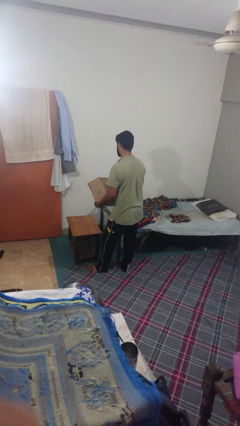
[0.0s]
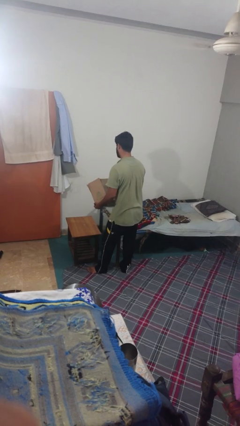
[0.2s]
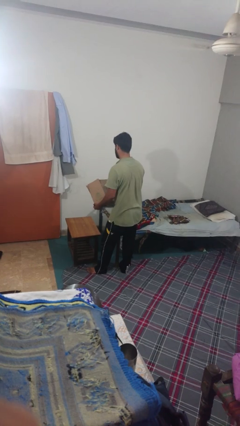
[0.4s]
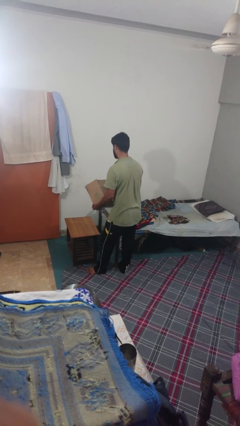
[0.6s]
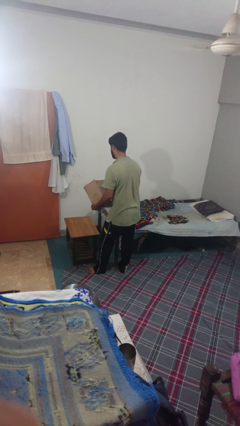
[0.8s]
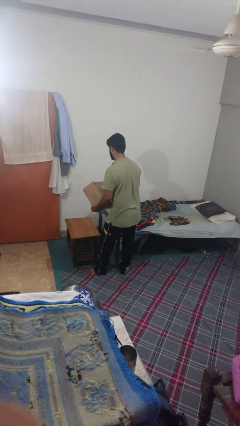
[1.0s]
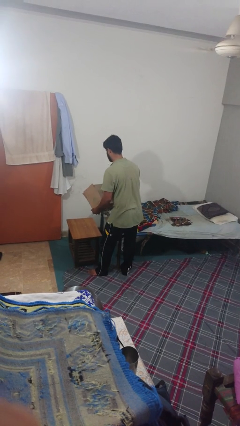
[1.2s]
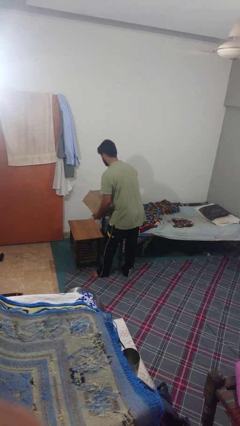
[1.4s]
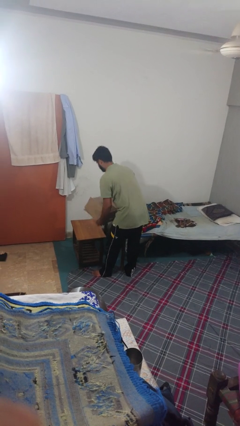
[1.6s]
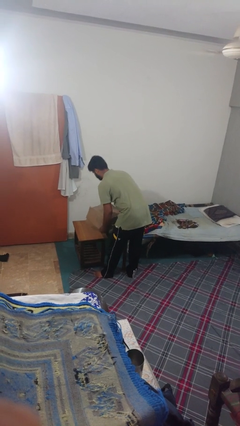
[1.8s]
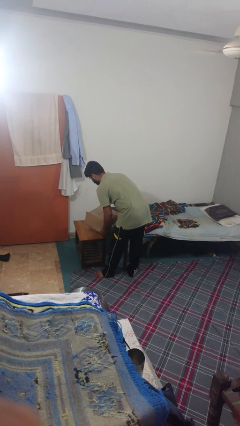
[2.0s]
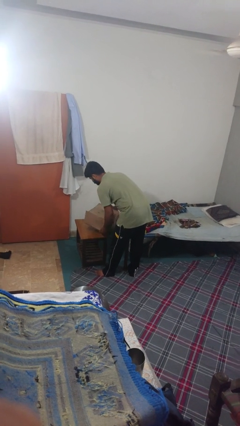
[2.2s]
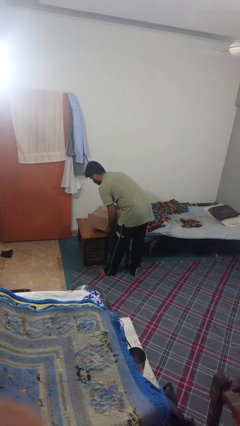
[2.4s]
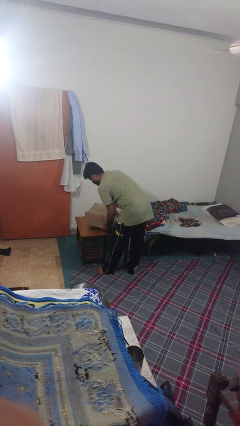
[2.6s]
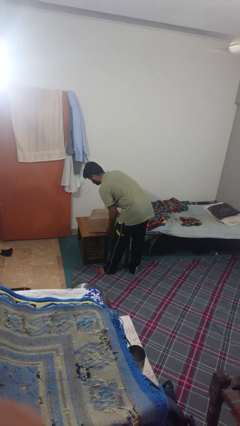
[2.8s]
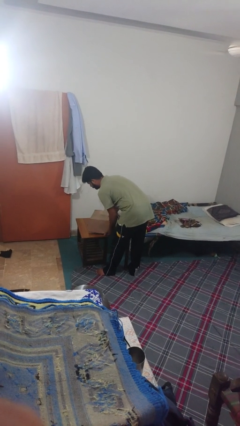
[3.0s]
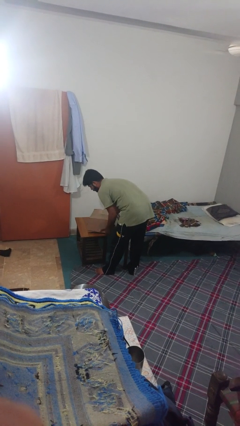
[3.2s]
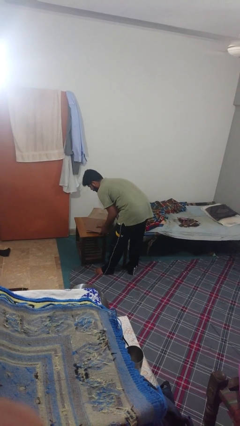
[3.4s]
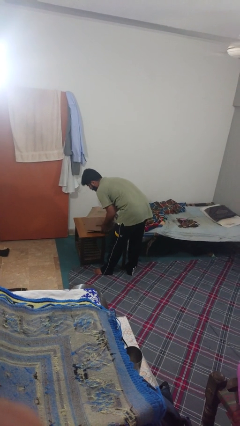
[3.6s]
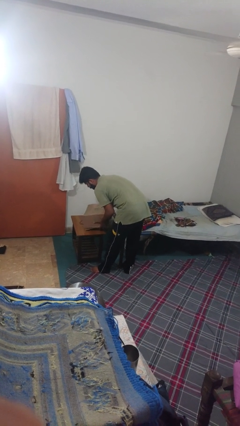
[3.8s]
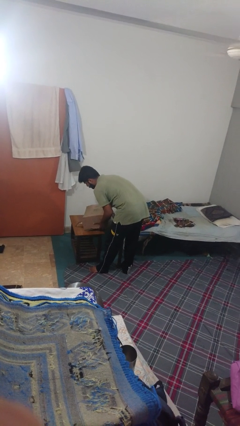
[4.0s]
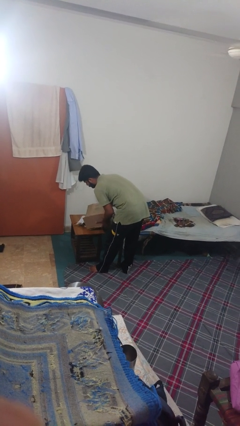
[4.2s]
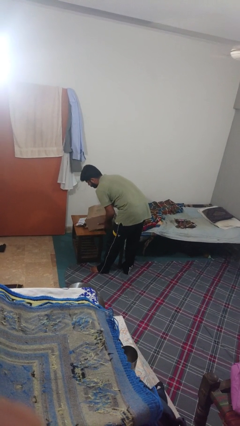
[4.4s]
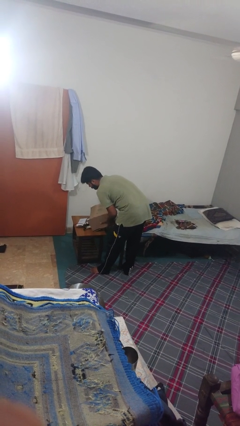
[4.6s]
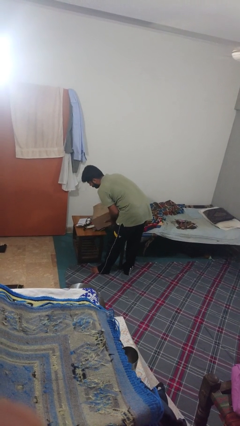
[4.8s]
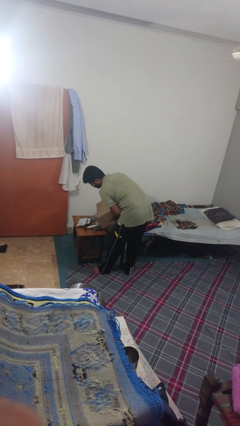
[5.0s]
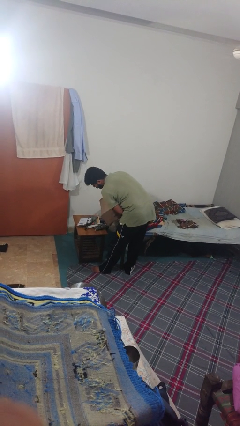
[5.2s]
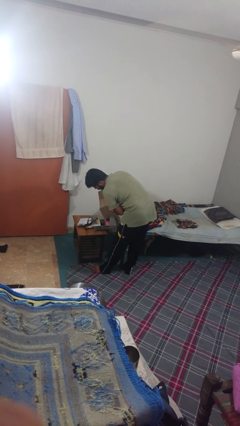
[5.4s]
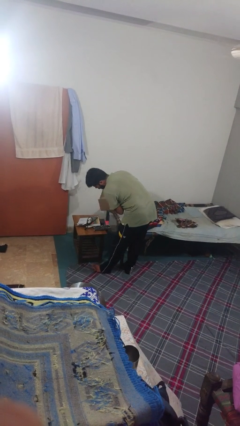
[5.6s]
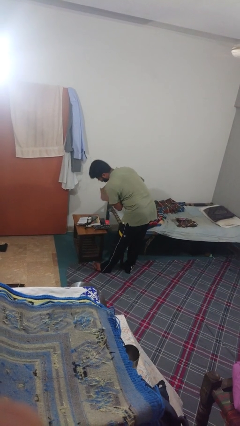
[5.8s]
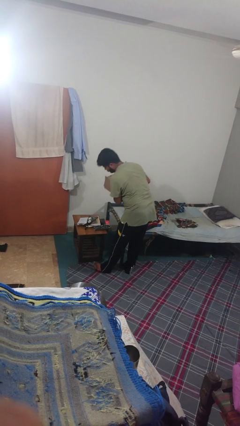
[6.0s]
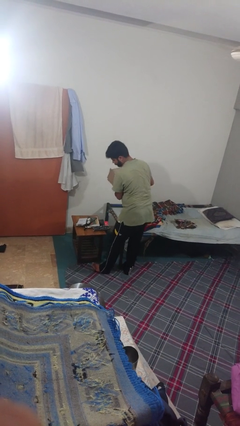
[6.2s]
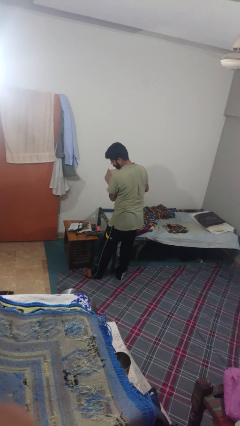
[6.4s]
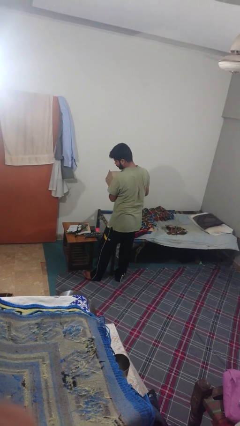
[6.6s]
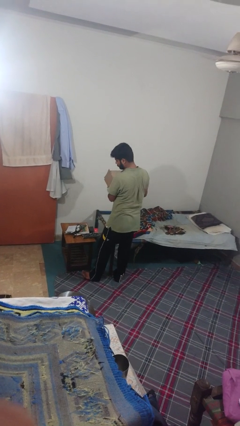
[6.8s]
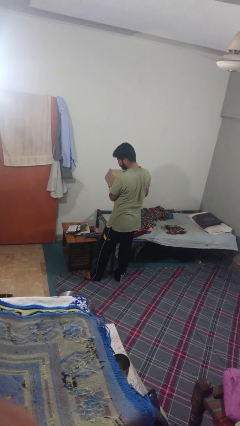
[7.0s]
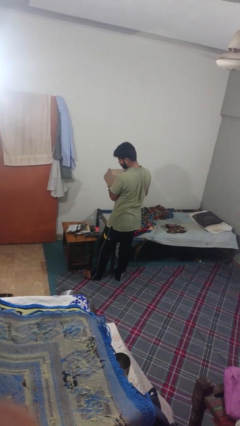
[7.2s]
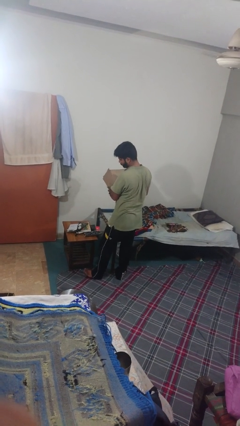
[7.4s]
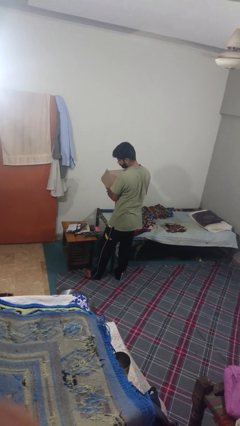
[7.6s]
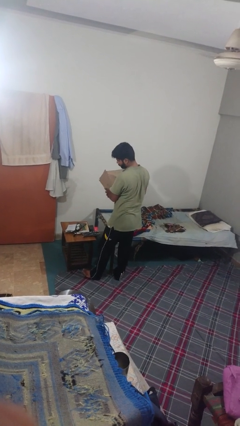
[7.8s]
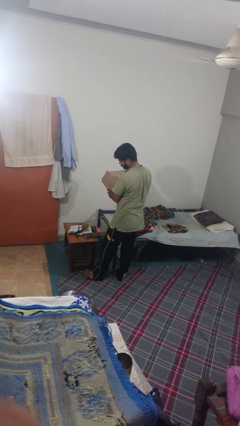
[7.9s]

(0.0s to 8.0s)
person unloads box onto table

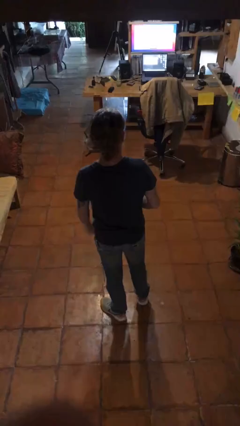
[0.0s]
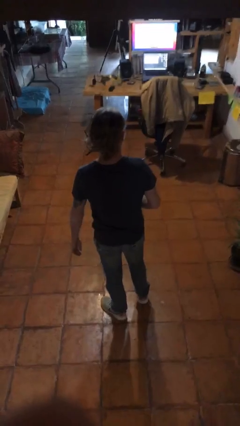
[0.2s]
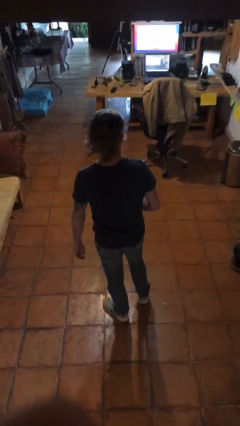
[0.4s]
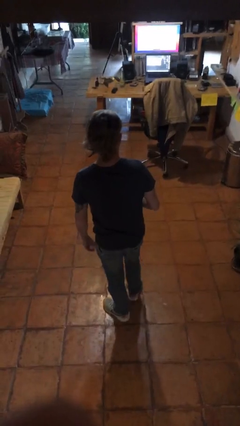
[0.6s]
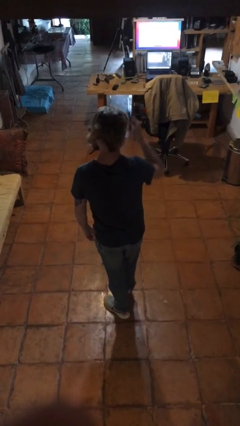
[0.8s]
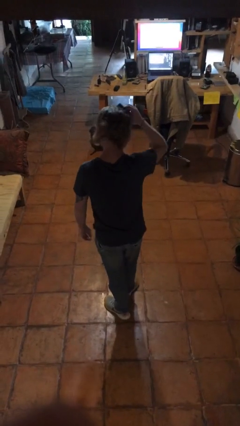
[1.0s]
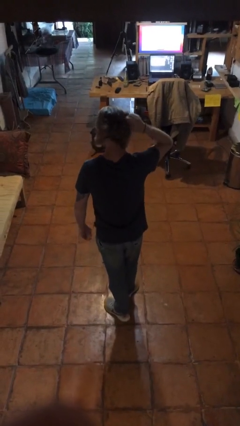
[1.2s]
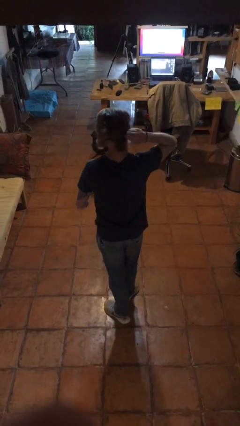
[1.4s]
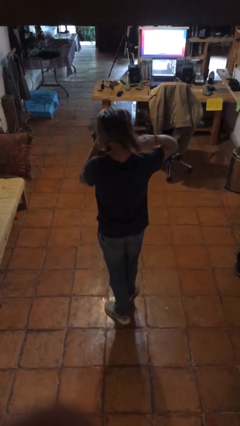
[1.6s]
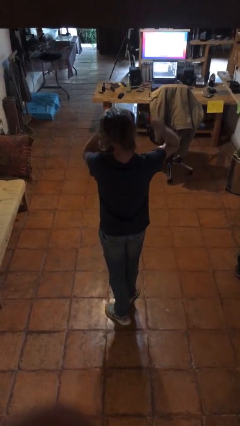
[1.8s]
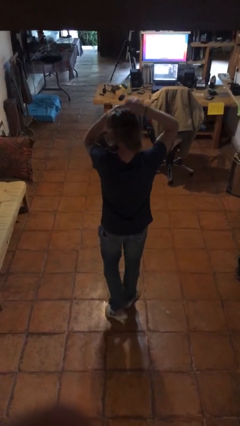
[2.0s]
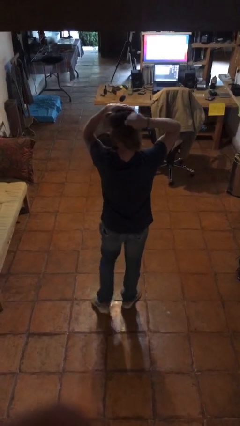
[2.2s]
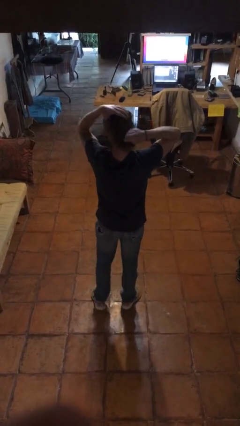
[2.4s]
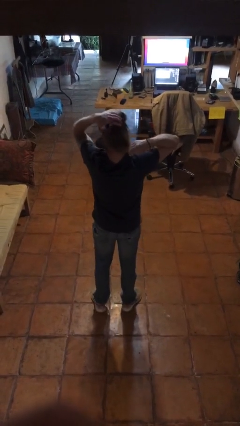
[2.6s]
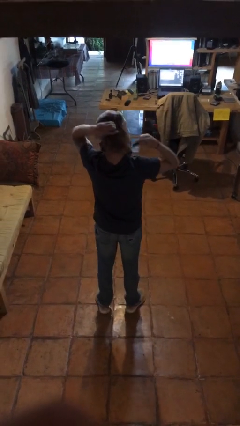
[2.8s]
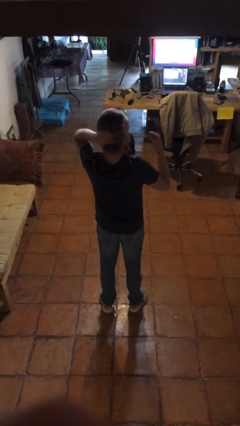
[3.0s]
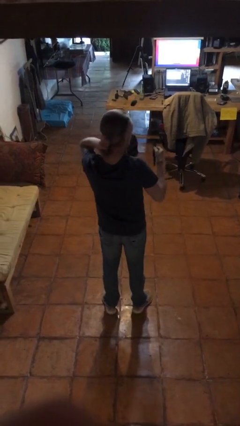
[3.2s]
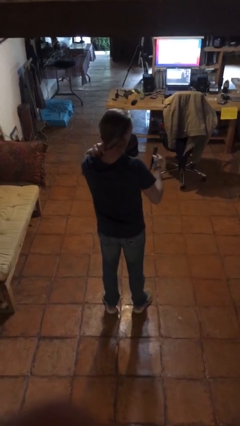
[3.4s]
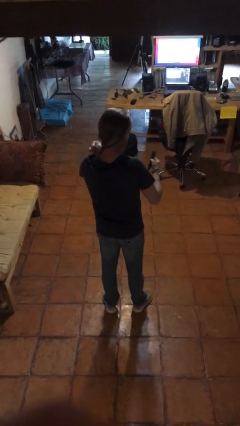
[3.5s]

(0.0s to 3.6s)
person brushes hair

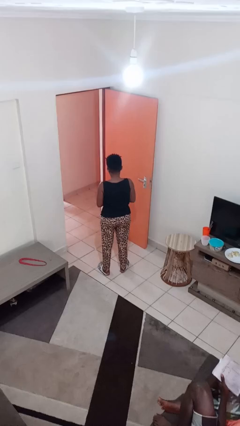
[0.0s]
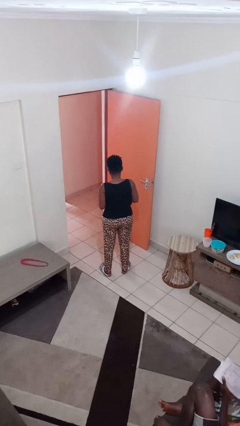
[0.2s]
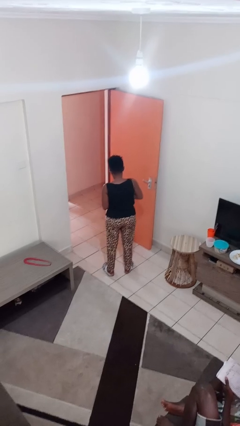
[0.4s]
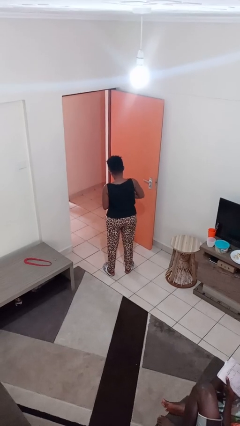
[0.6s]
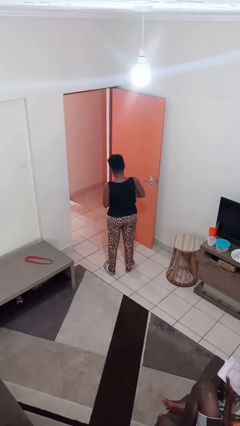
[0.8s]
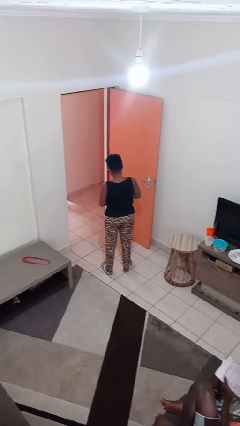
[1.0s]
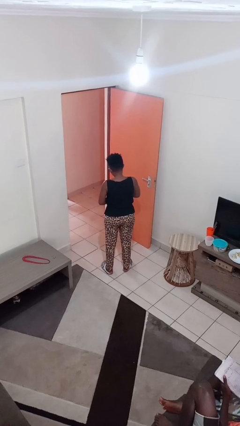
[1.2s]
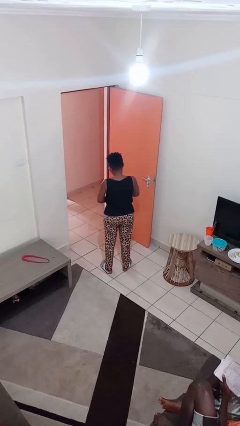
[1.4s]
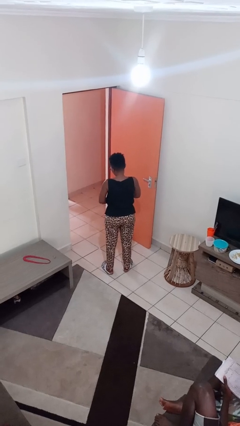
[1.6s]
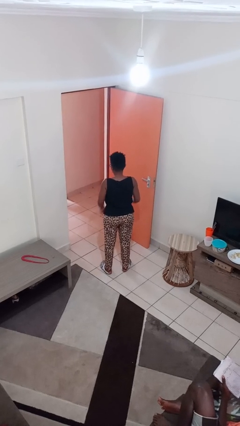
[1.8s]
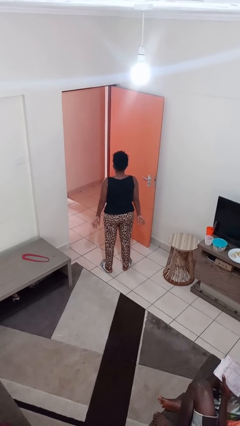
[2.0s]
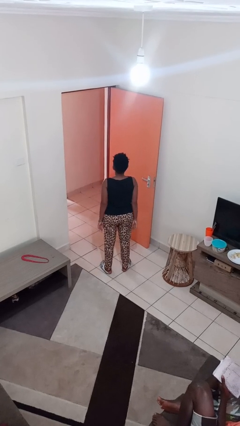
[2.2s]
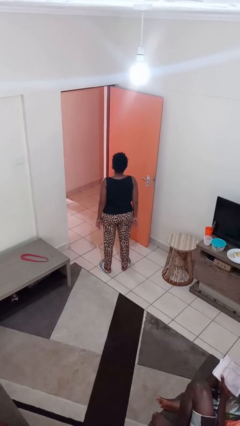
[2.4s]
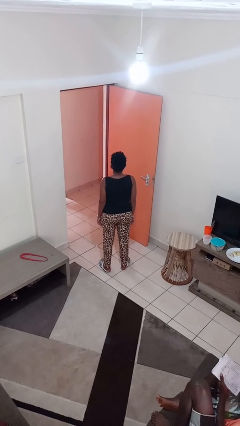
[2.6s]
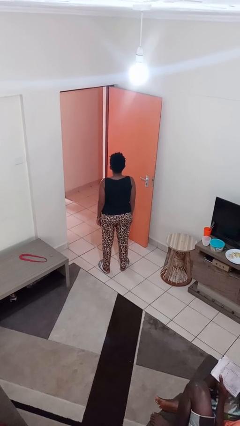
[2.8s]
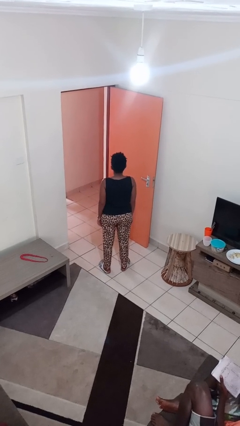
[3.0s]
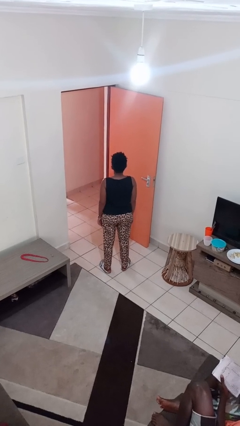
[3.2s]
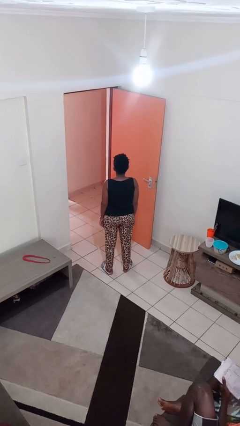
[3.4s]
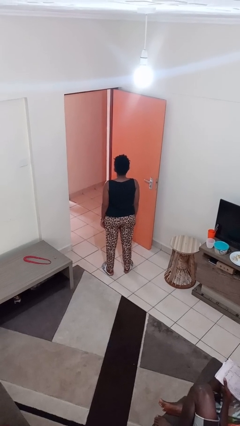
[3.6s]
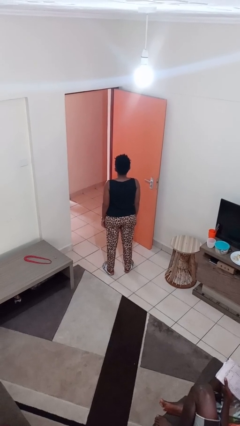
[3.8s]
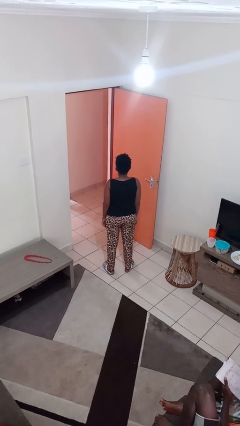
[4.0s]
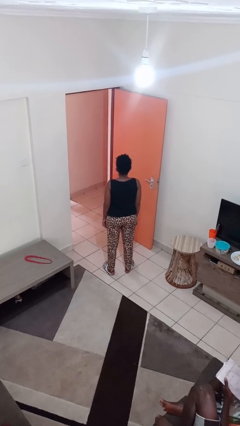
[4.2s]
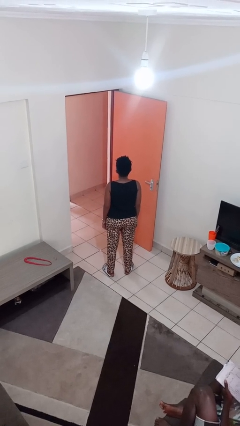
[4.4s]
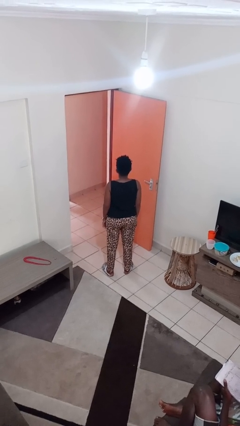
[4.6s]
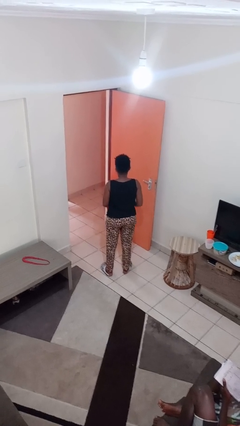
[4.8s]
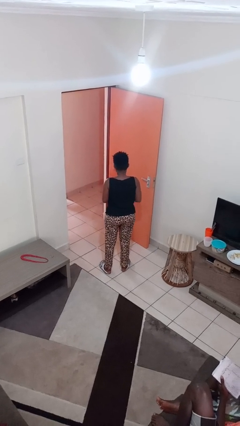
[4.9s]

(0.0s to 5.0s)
person puts on wristwatch

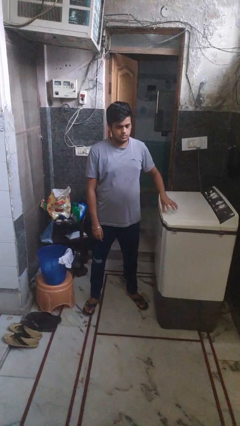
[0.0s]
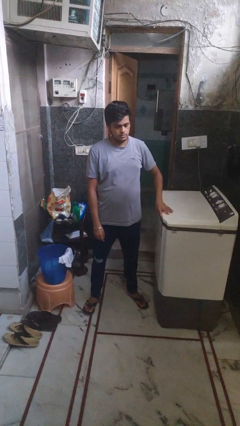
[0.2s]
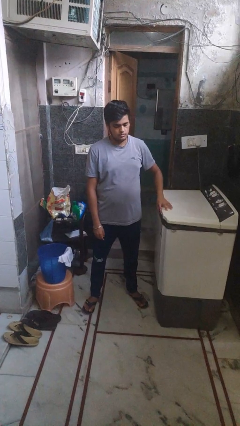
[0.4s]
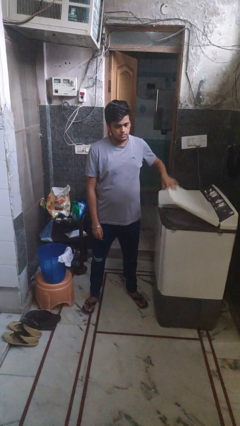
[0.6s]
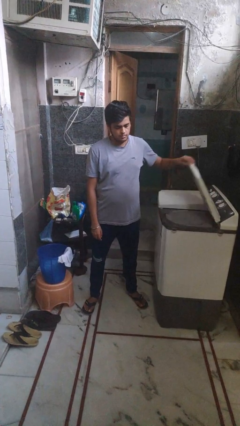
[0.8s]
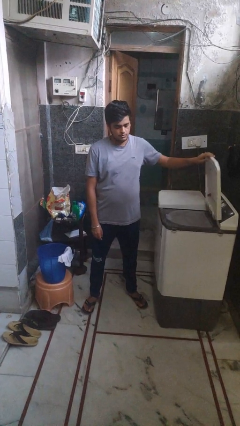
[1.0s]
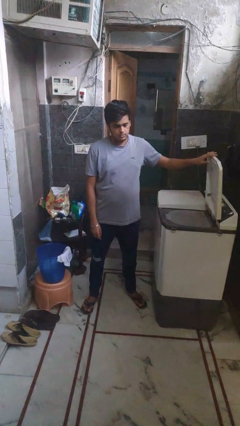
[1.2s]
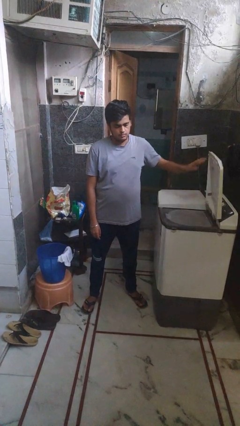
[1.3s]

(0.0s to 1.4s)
person opens clothes washer

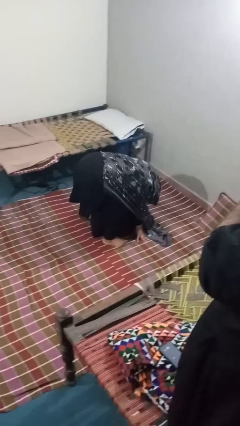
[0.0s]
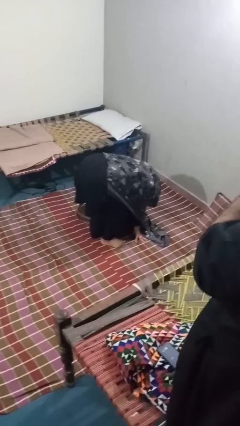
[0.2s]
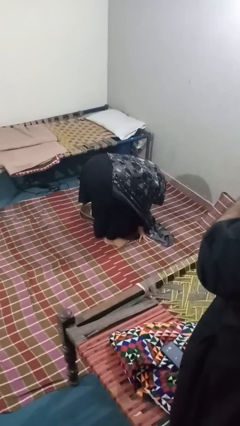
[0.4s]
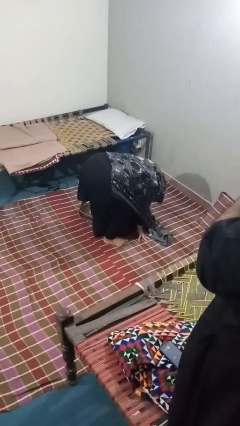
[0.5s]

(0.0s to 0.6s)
person stands up from floor
